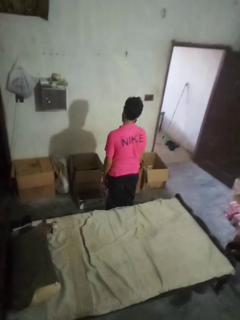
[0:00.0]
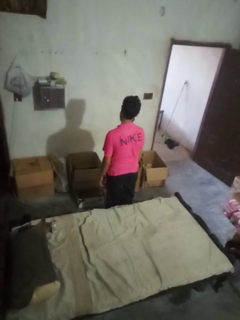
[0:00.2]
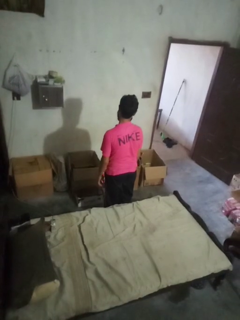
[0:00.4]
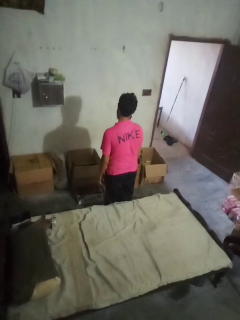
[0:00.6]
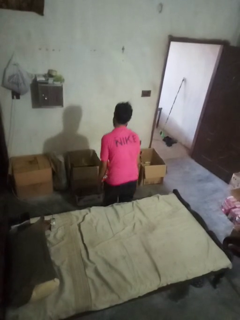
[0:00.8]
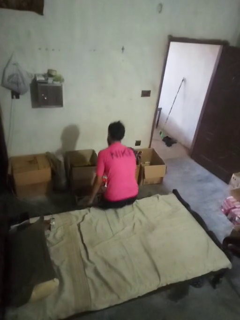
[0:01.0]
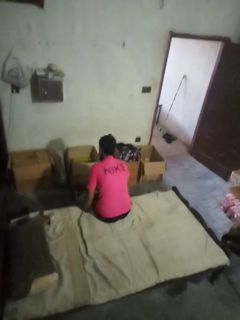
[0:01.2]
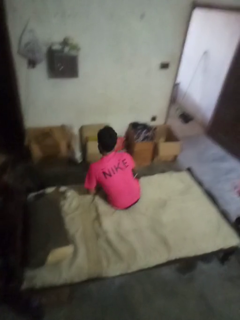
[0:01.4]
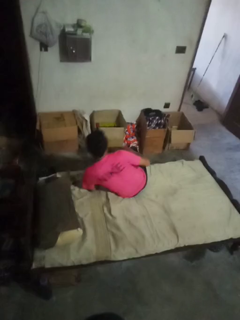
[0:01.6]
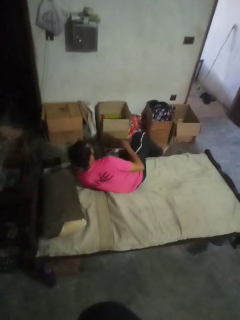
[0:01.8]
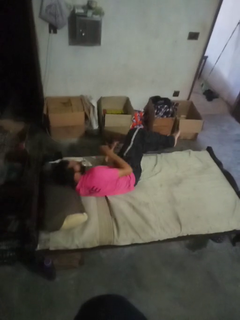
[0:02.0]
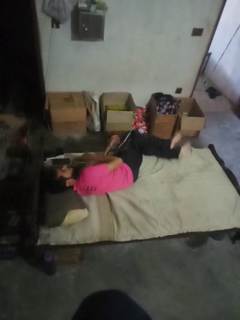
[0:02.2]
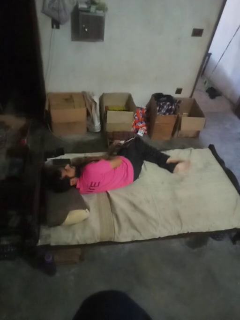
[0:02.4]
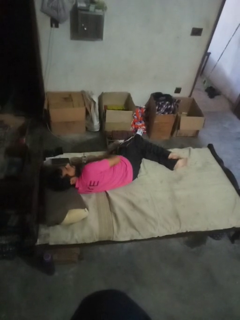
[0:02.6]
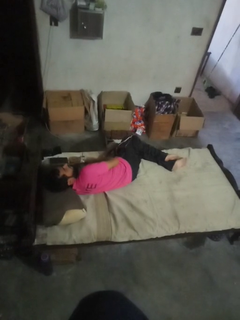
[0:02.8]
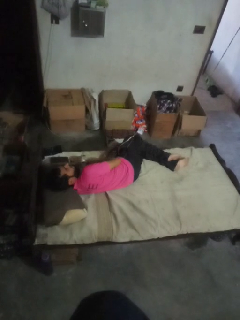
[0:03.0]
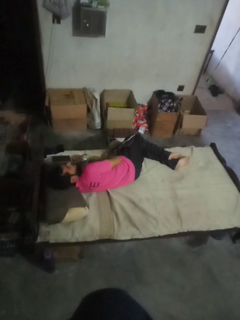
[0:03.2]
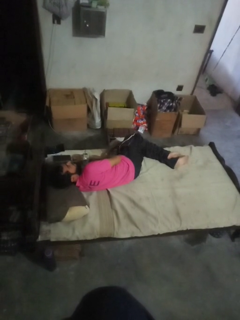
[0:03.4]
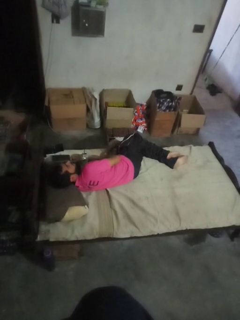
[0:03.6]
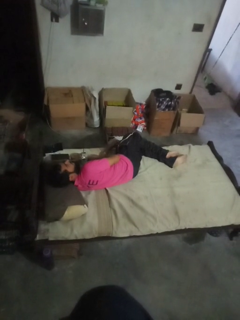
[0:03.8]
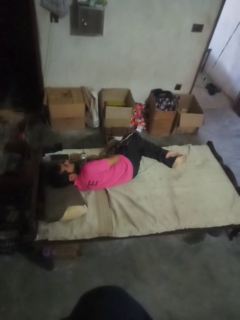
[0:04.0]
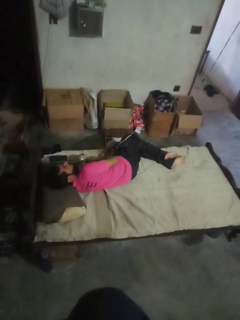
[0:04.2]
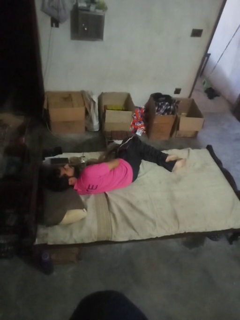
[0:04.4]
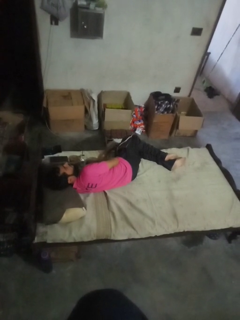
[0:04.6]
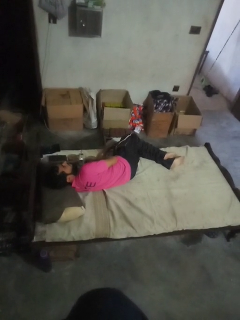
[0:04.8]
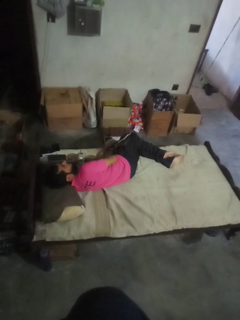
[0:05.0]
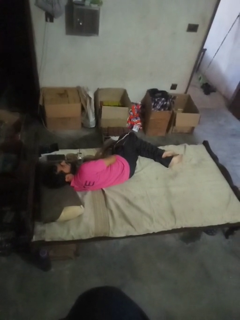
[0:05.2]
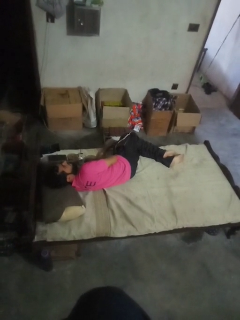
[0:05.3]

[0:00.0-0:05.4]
person lies down on bed

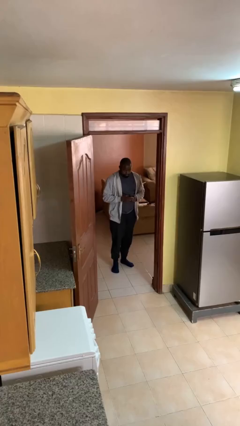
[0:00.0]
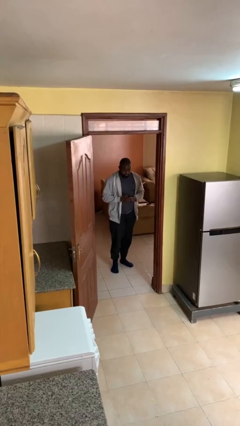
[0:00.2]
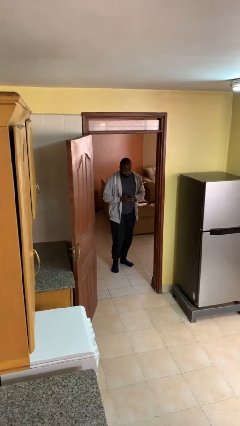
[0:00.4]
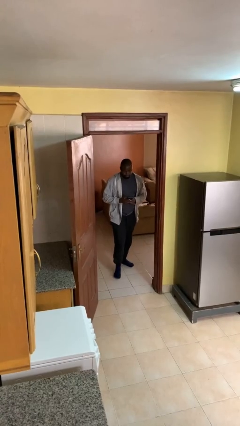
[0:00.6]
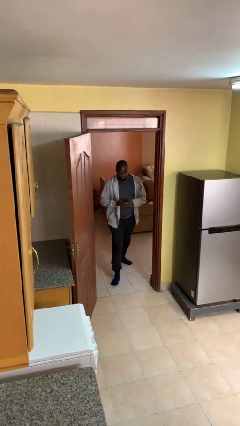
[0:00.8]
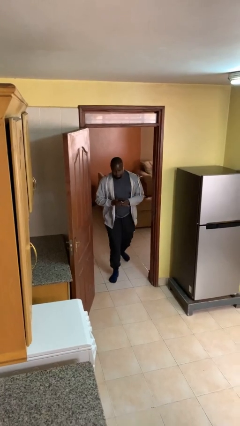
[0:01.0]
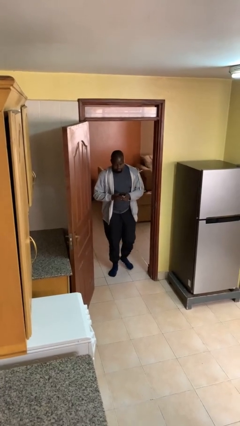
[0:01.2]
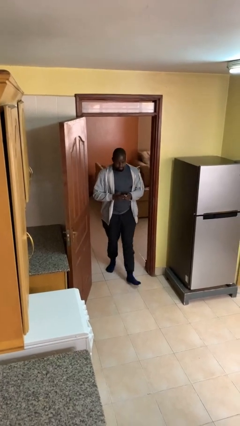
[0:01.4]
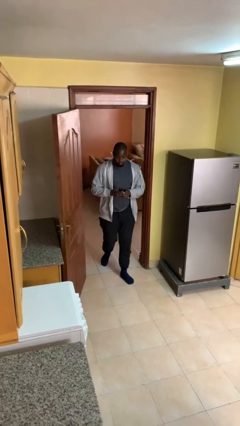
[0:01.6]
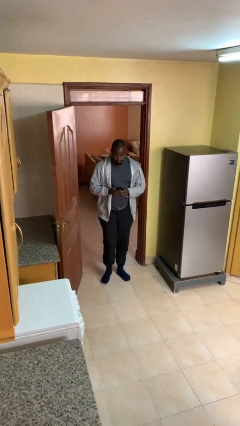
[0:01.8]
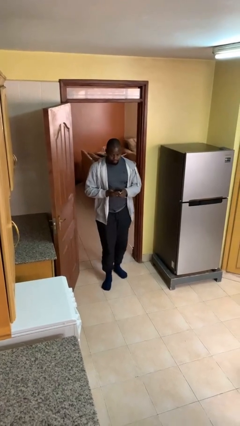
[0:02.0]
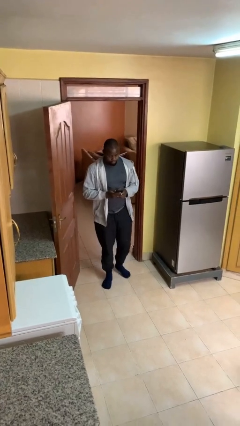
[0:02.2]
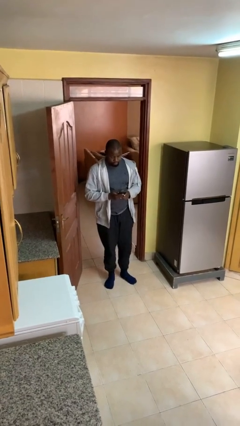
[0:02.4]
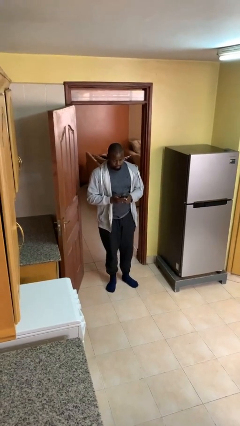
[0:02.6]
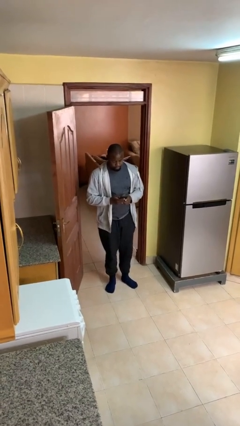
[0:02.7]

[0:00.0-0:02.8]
person enters scene through structure

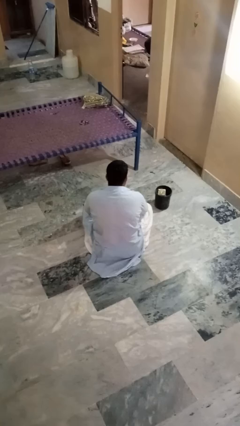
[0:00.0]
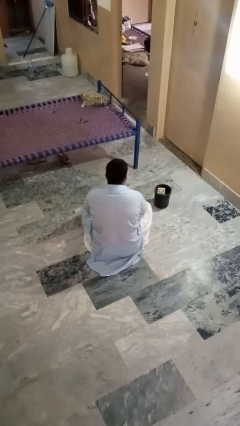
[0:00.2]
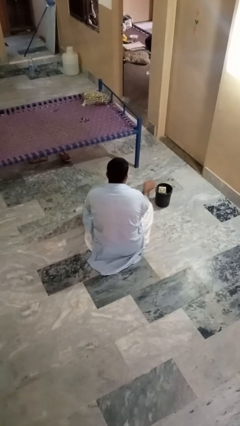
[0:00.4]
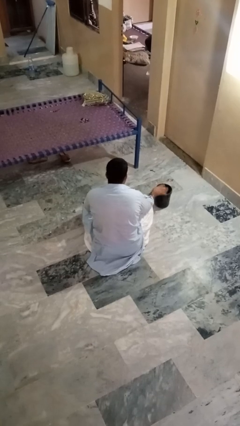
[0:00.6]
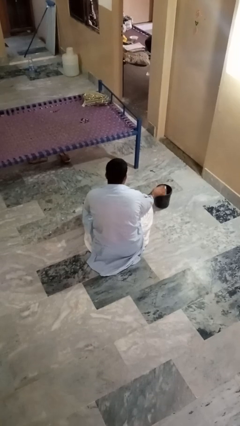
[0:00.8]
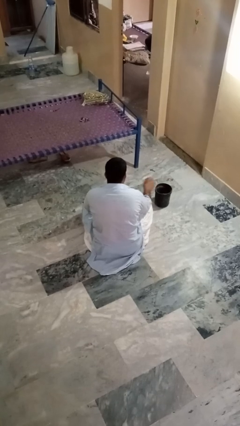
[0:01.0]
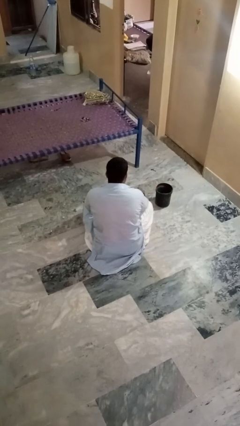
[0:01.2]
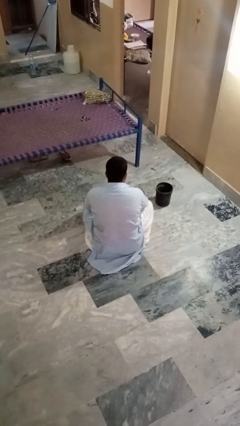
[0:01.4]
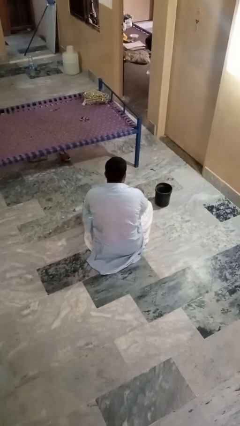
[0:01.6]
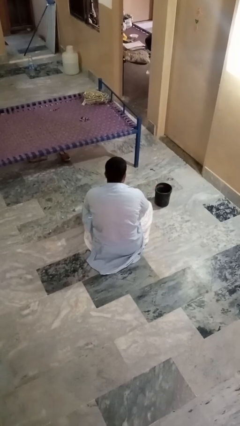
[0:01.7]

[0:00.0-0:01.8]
person takes object from basket

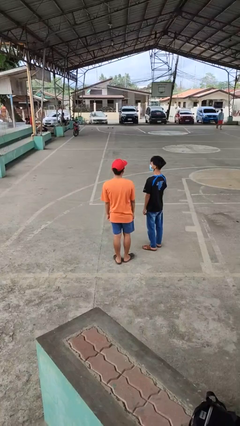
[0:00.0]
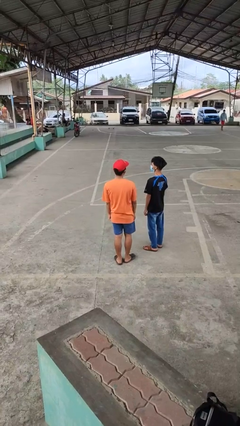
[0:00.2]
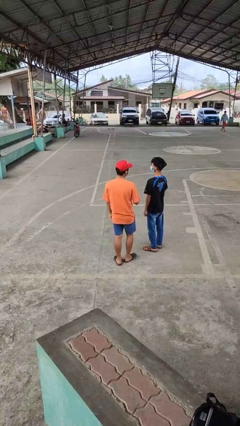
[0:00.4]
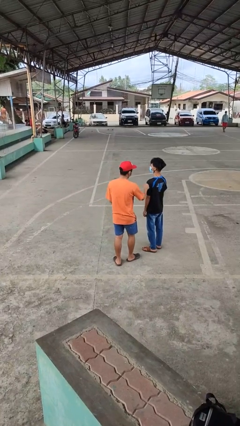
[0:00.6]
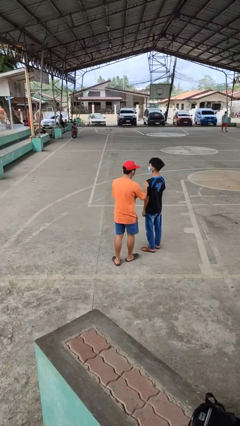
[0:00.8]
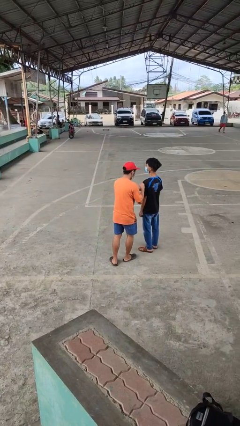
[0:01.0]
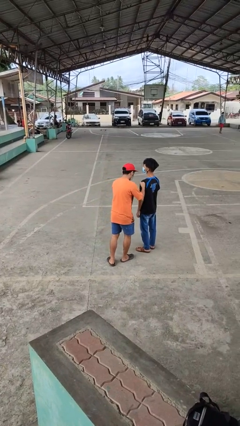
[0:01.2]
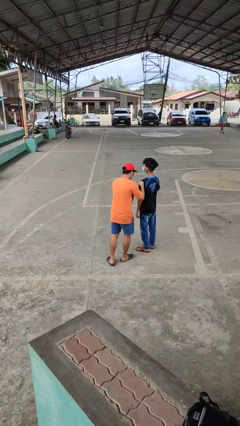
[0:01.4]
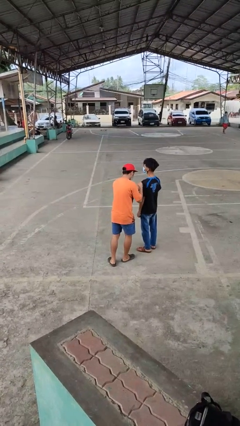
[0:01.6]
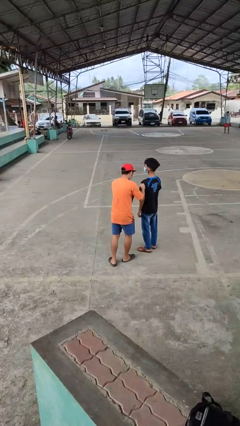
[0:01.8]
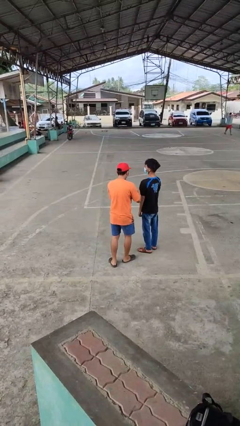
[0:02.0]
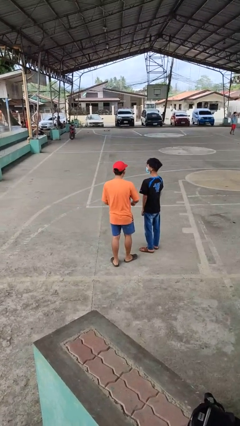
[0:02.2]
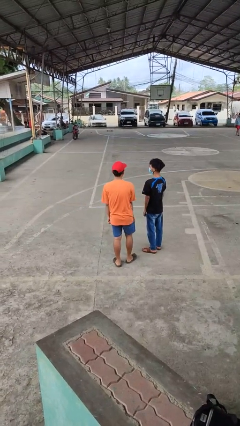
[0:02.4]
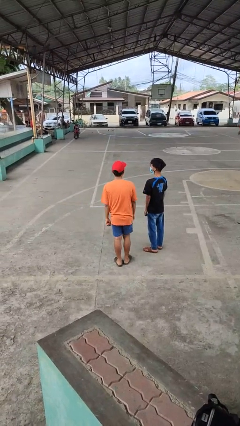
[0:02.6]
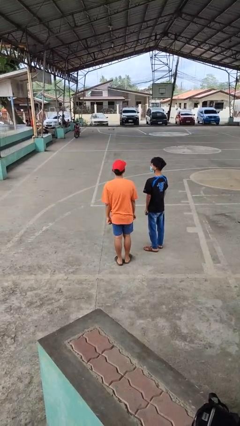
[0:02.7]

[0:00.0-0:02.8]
person pounds shoulders of person

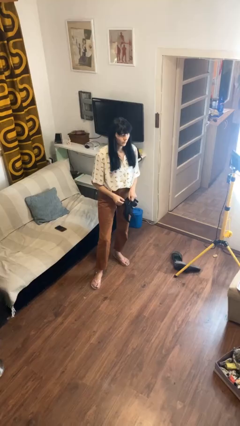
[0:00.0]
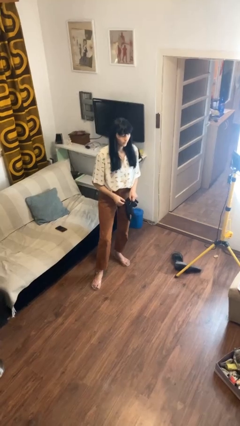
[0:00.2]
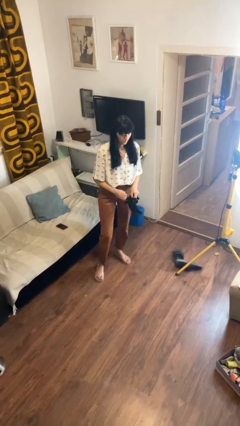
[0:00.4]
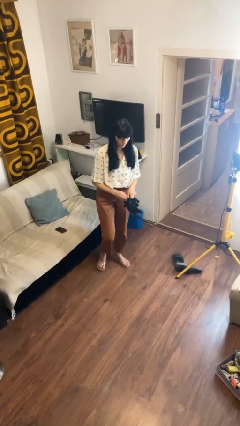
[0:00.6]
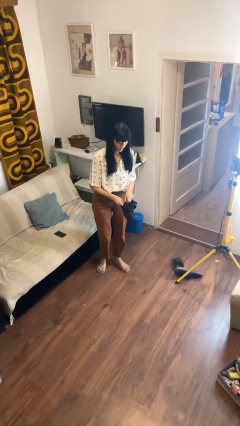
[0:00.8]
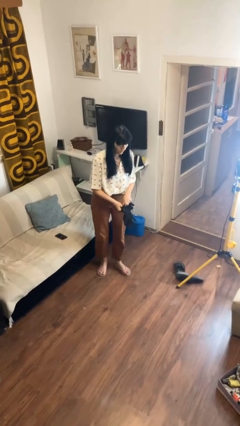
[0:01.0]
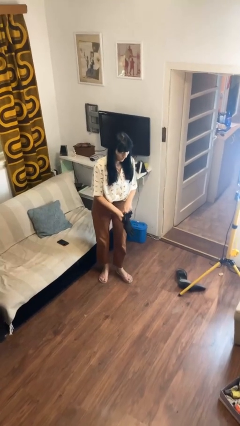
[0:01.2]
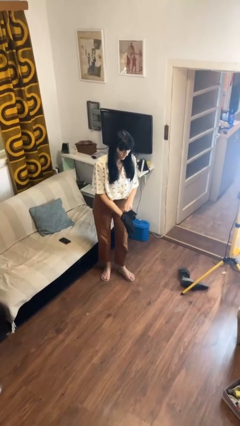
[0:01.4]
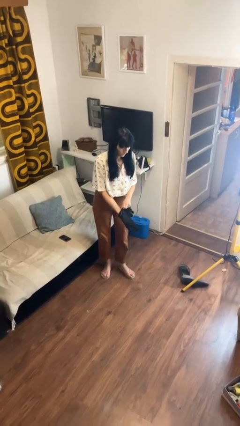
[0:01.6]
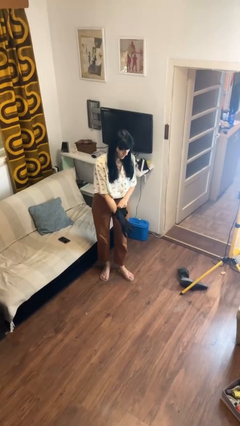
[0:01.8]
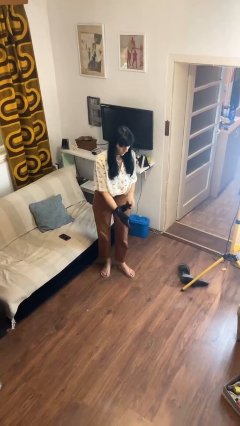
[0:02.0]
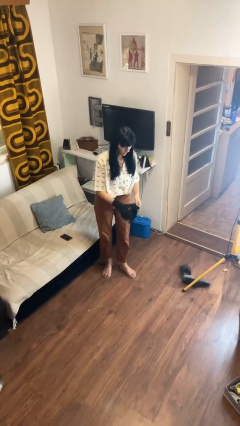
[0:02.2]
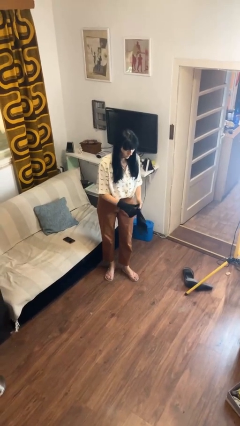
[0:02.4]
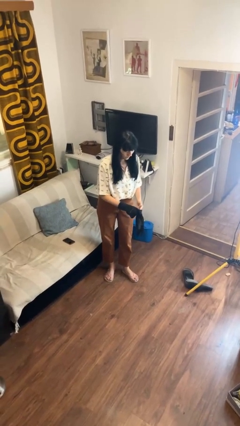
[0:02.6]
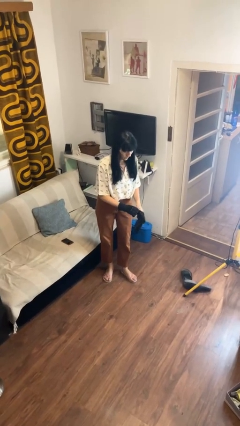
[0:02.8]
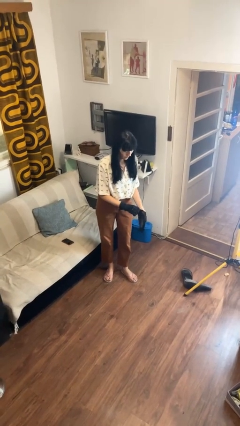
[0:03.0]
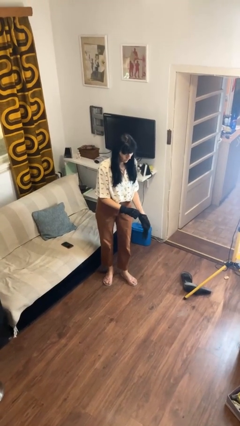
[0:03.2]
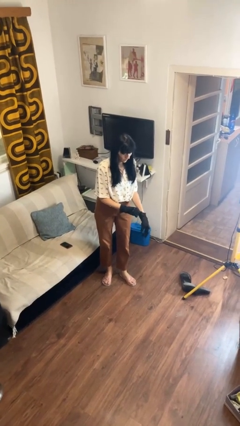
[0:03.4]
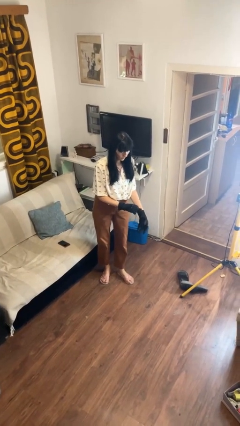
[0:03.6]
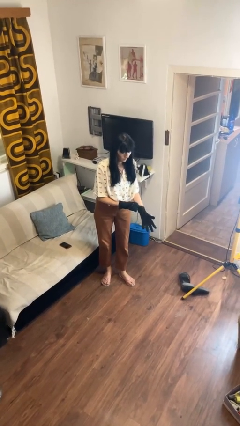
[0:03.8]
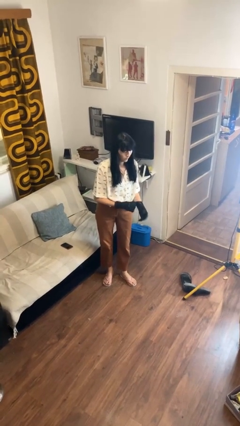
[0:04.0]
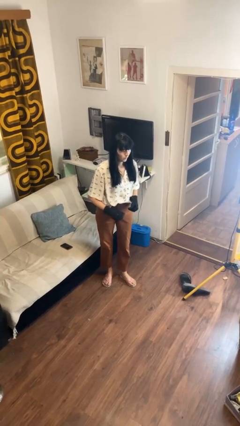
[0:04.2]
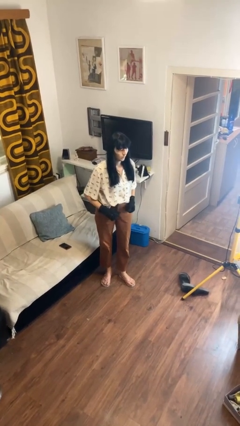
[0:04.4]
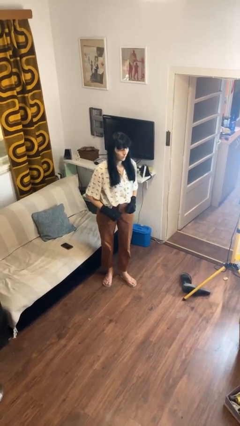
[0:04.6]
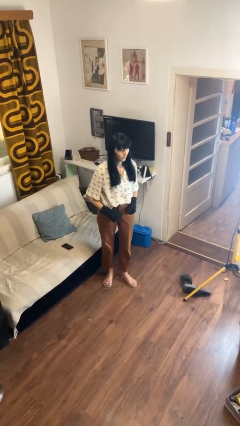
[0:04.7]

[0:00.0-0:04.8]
person puts on gloves

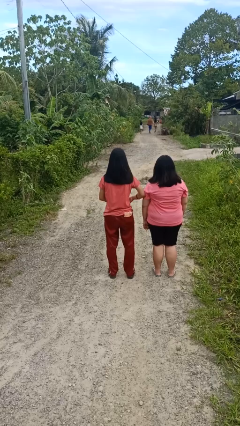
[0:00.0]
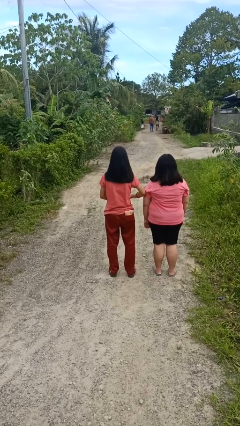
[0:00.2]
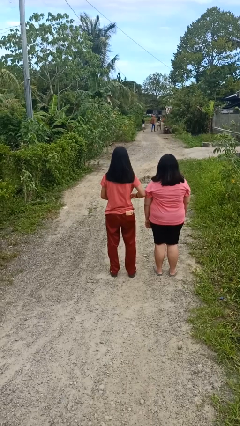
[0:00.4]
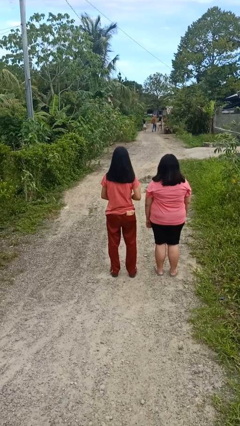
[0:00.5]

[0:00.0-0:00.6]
person nudges person with elbow

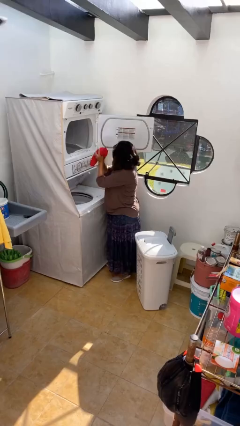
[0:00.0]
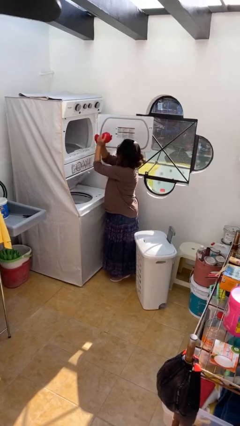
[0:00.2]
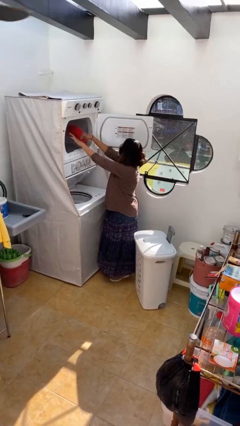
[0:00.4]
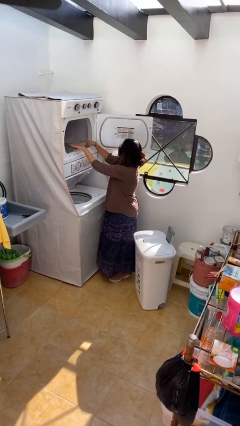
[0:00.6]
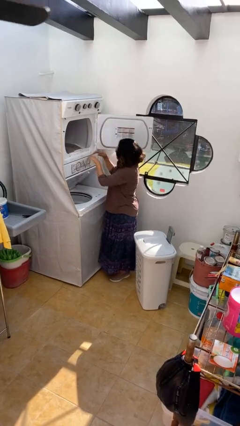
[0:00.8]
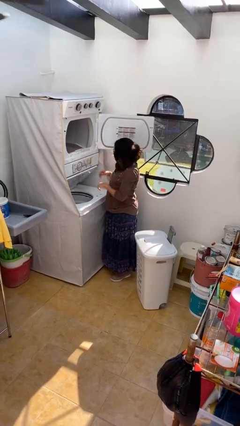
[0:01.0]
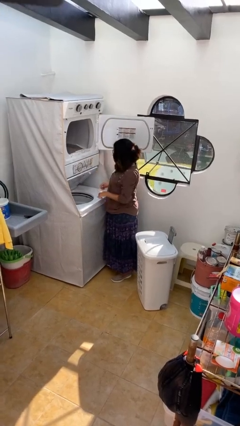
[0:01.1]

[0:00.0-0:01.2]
person loads dryer
